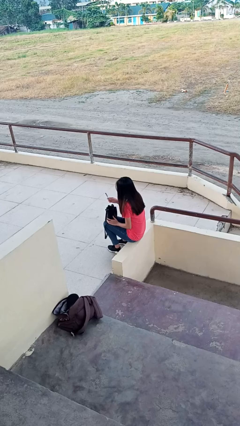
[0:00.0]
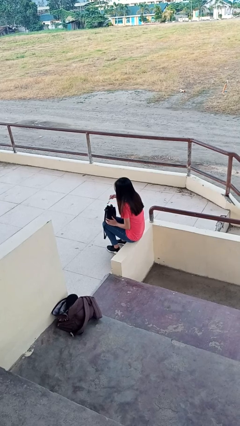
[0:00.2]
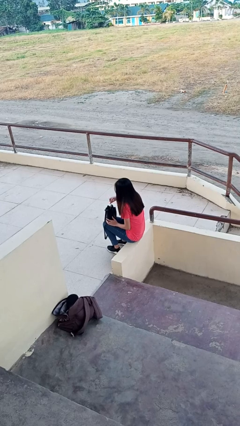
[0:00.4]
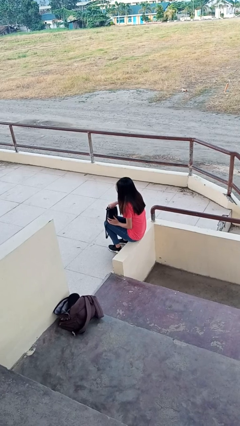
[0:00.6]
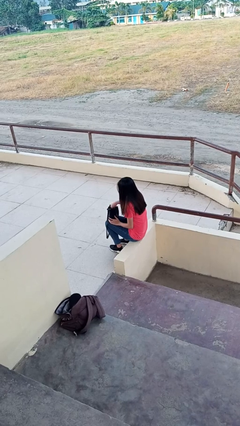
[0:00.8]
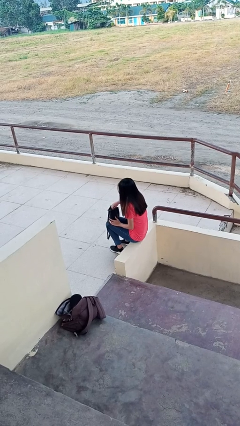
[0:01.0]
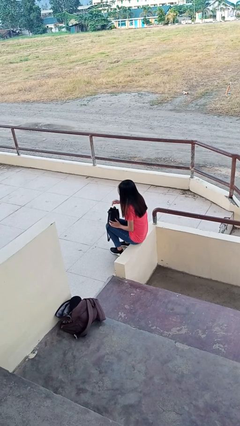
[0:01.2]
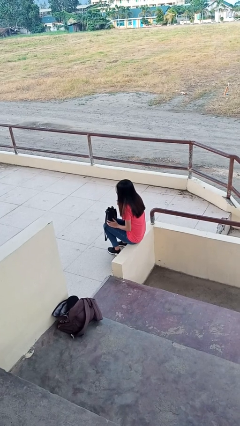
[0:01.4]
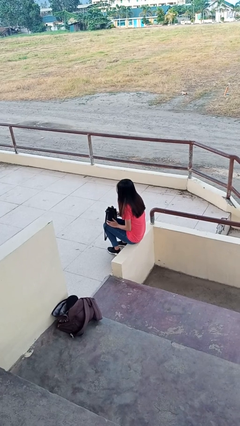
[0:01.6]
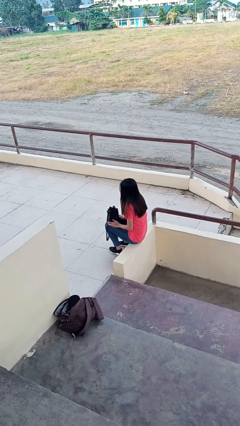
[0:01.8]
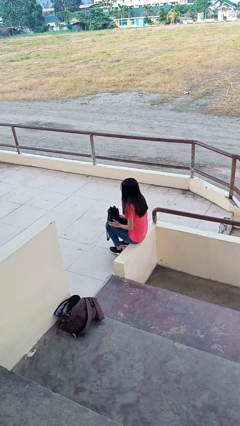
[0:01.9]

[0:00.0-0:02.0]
person puts object into purse

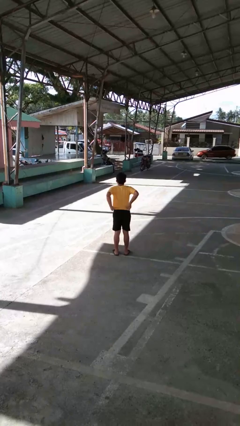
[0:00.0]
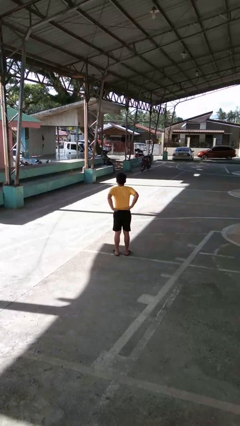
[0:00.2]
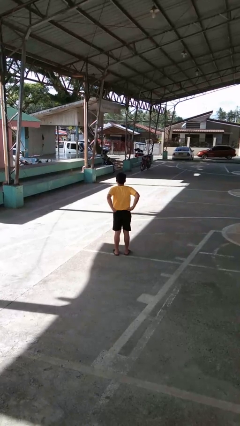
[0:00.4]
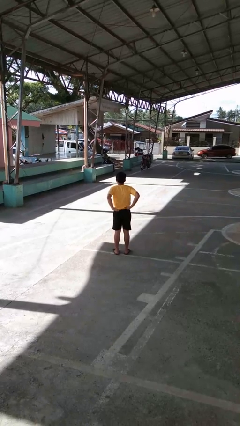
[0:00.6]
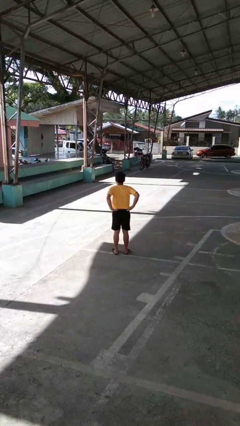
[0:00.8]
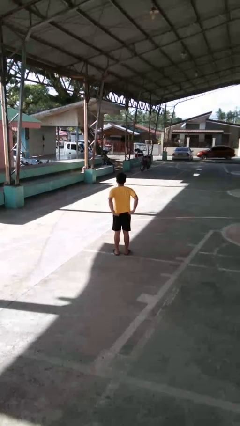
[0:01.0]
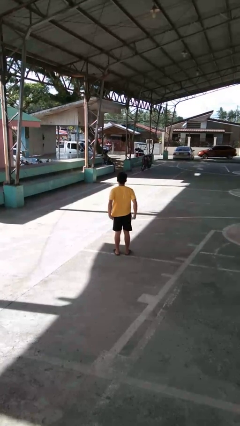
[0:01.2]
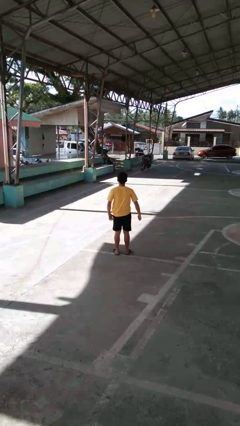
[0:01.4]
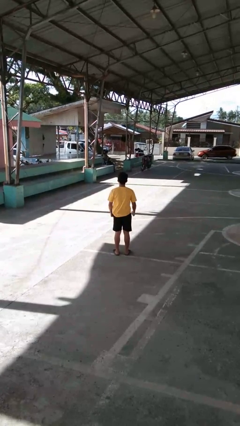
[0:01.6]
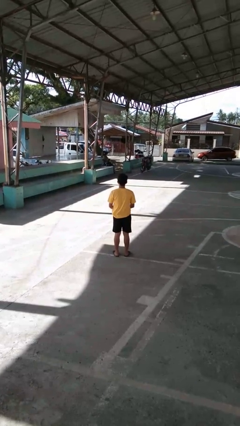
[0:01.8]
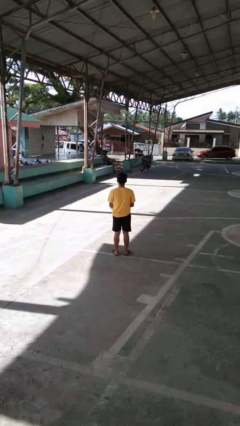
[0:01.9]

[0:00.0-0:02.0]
person untucks shirt

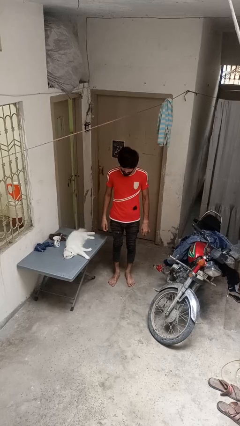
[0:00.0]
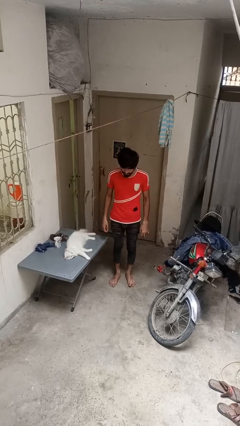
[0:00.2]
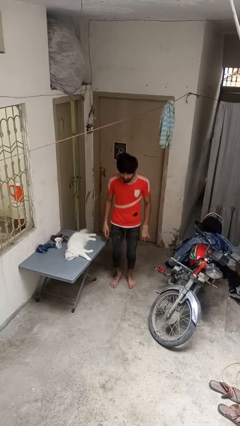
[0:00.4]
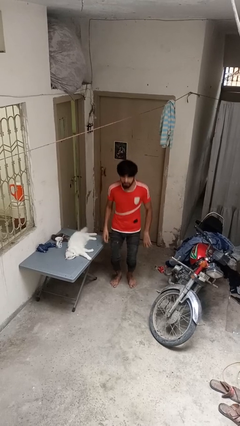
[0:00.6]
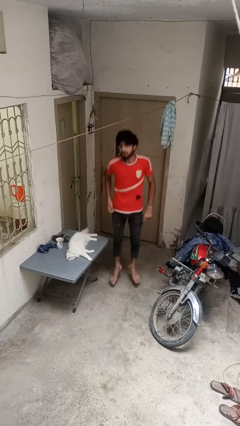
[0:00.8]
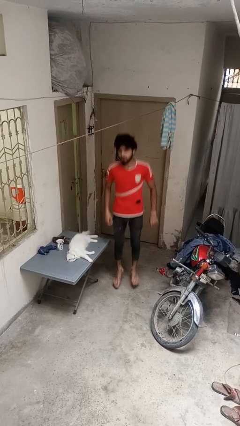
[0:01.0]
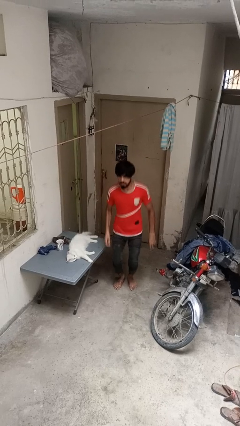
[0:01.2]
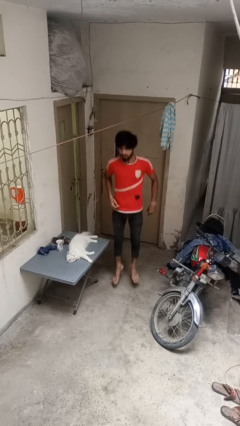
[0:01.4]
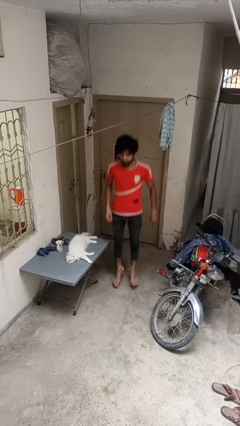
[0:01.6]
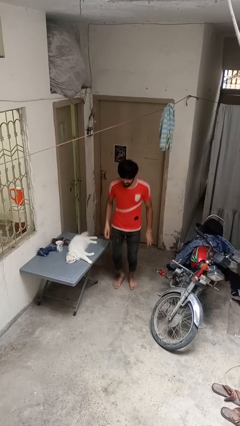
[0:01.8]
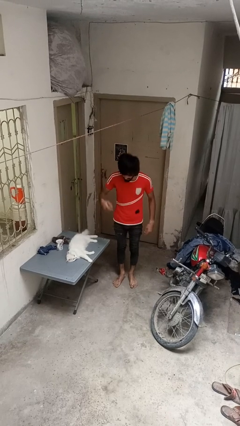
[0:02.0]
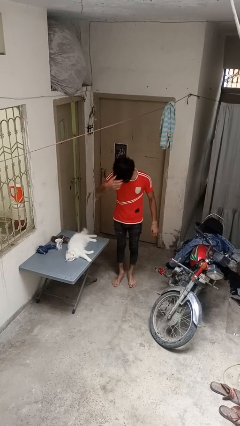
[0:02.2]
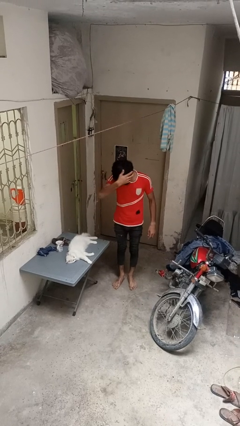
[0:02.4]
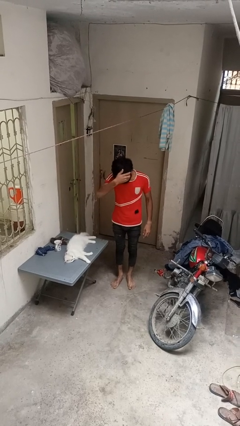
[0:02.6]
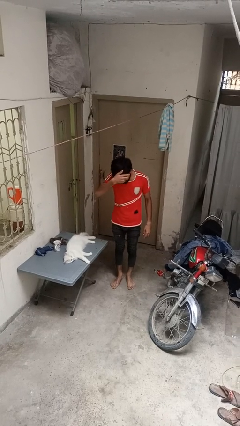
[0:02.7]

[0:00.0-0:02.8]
person jumps

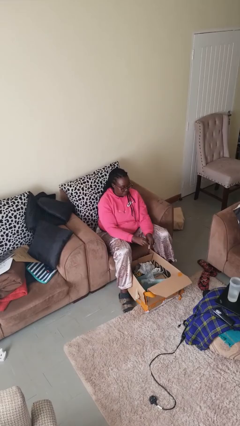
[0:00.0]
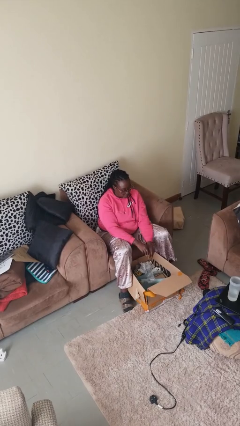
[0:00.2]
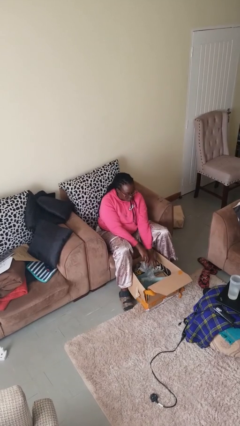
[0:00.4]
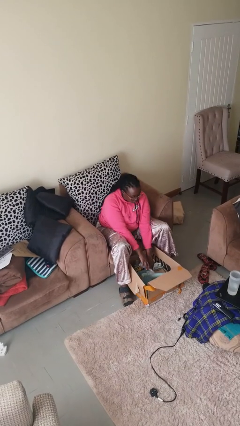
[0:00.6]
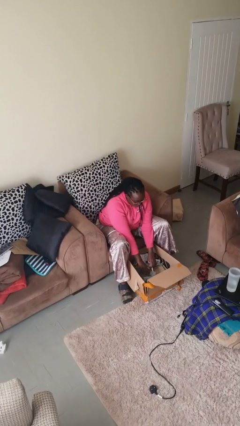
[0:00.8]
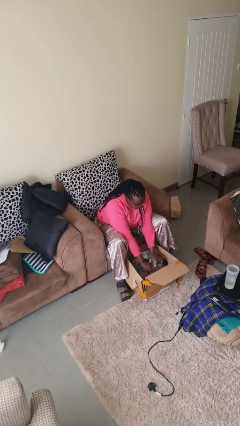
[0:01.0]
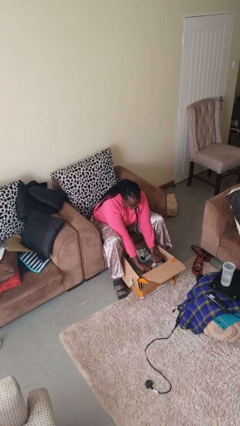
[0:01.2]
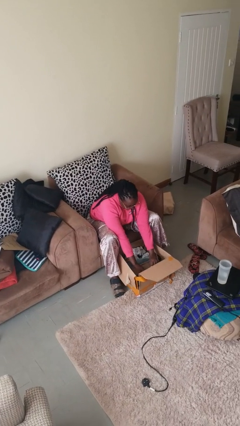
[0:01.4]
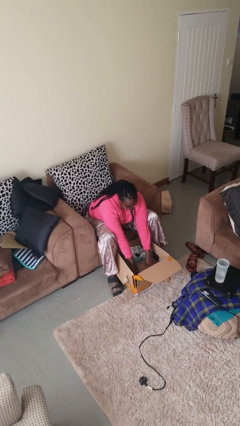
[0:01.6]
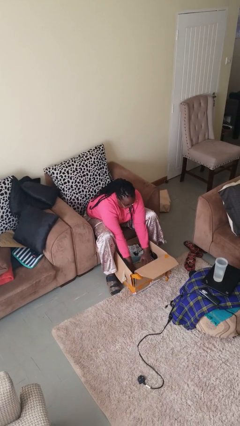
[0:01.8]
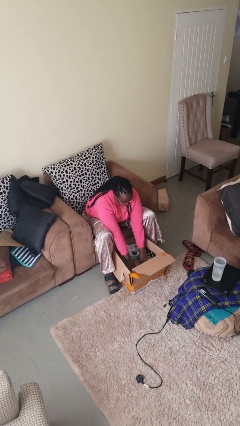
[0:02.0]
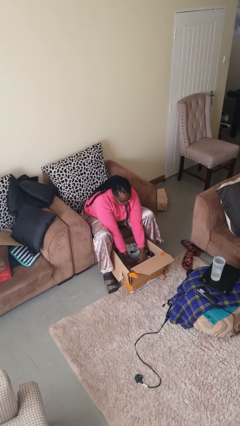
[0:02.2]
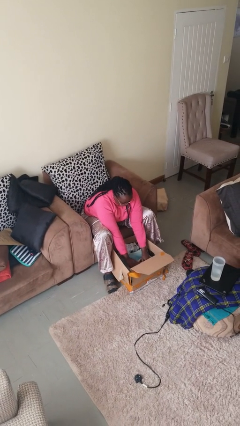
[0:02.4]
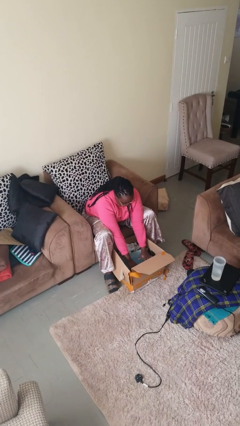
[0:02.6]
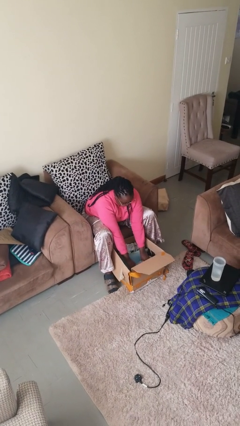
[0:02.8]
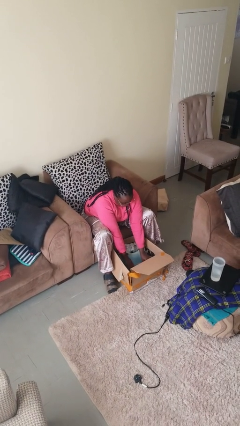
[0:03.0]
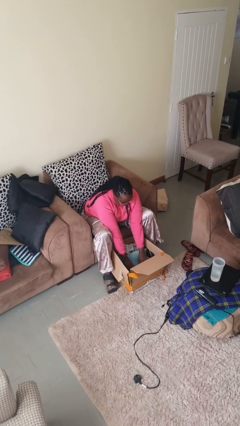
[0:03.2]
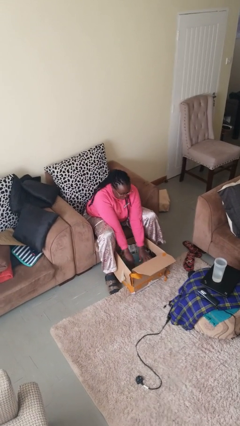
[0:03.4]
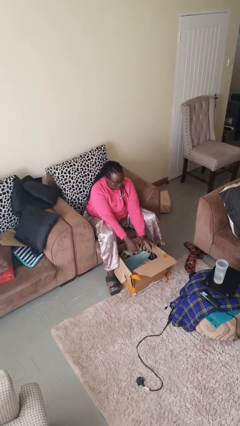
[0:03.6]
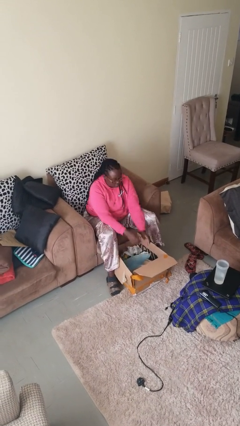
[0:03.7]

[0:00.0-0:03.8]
person searches in box

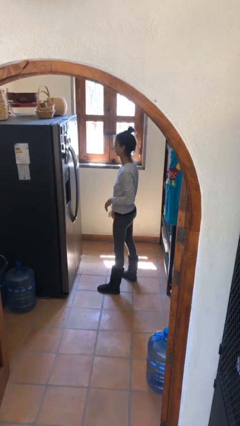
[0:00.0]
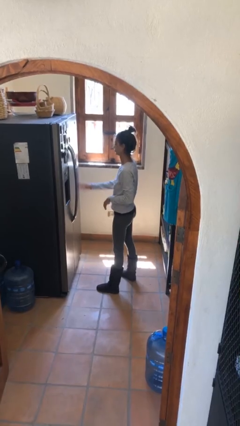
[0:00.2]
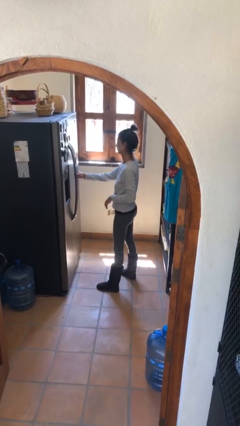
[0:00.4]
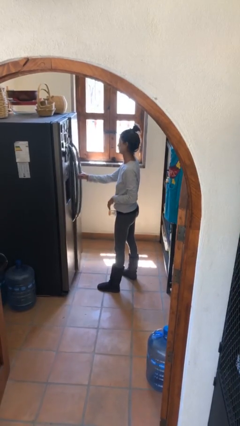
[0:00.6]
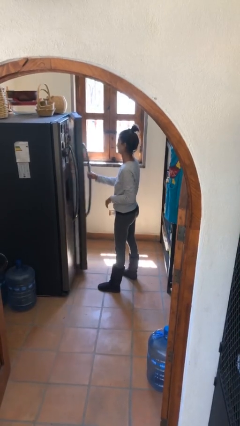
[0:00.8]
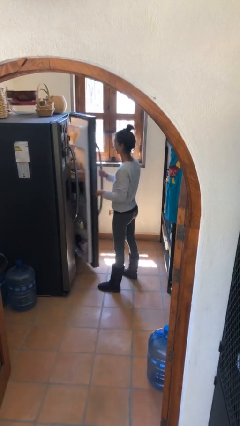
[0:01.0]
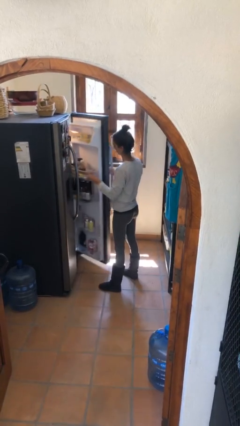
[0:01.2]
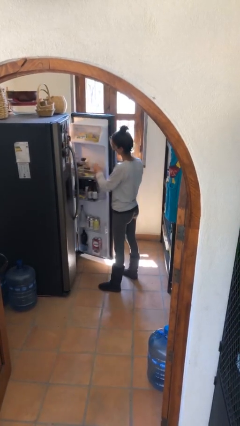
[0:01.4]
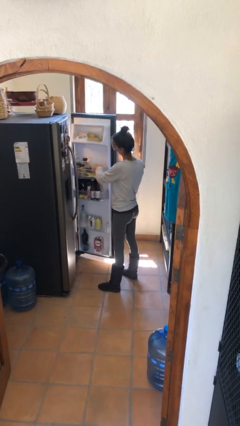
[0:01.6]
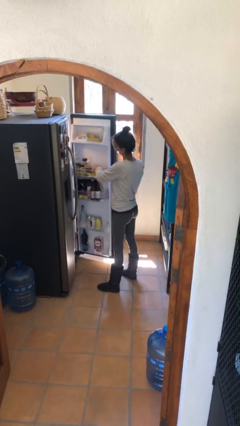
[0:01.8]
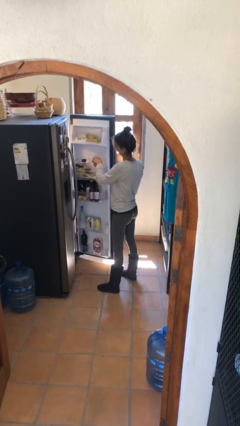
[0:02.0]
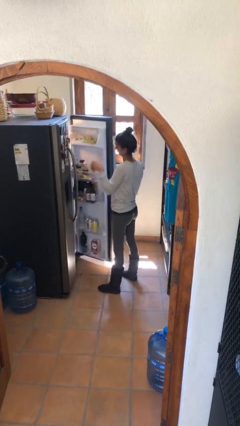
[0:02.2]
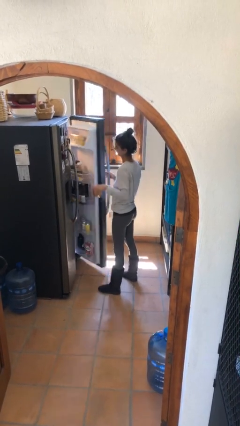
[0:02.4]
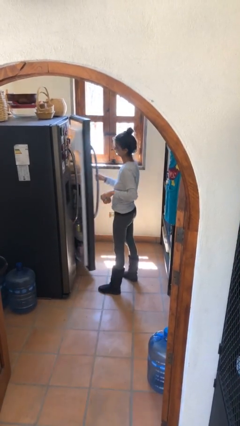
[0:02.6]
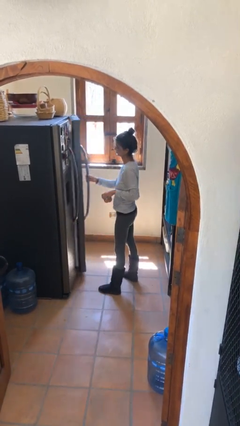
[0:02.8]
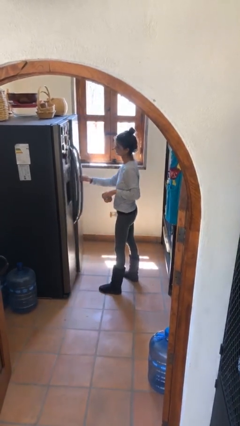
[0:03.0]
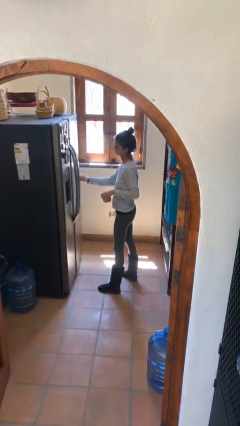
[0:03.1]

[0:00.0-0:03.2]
person takes object from refrigerator

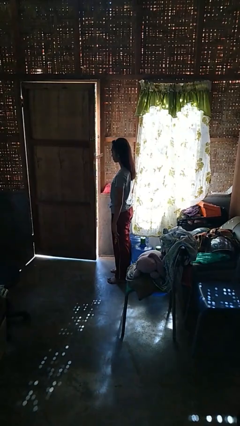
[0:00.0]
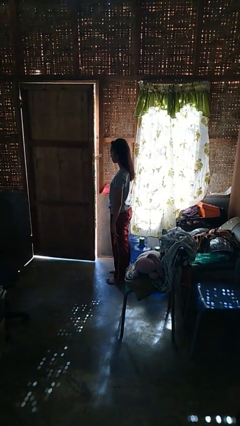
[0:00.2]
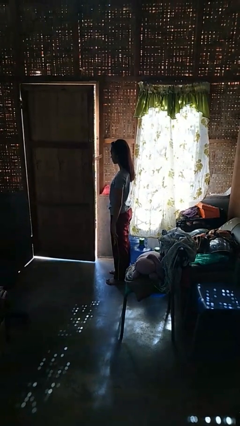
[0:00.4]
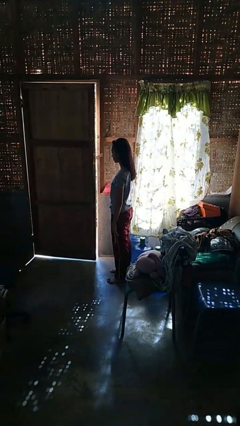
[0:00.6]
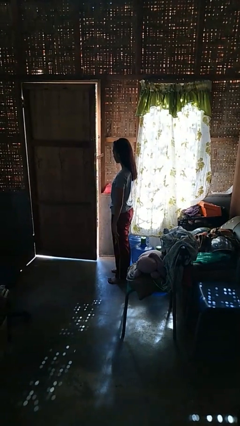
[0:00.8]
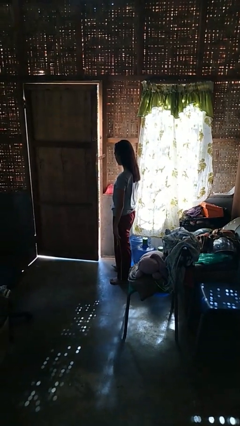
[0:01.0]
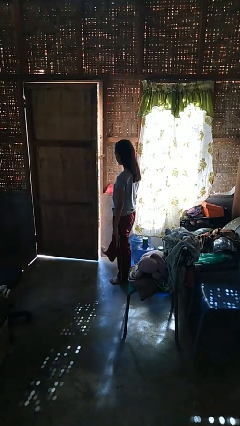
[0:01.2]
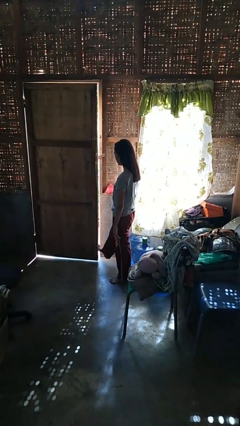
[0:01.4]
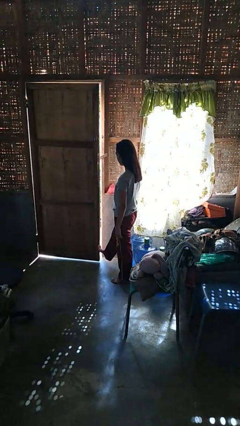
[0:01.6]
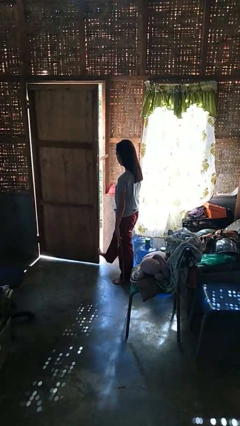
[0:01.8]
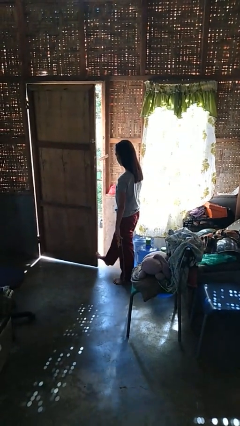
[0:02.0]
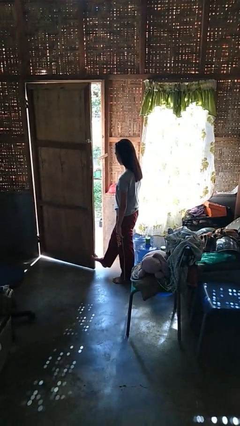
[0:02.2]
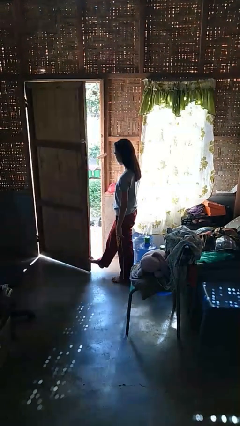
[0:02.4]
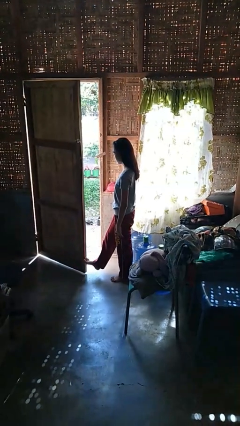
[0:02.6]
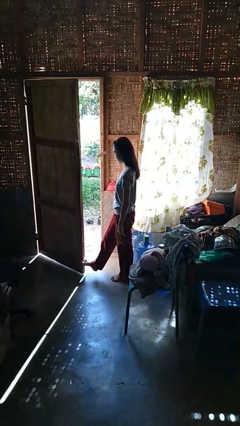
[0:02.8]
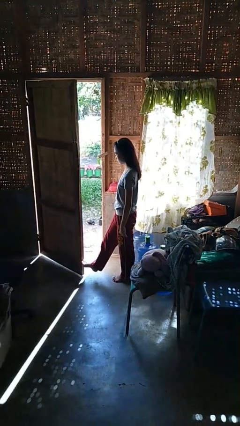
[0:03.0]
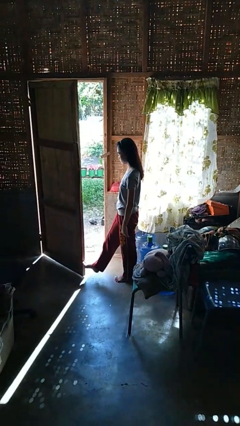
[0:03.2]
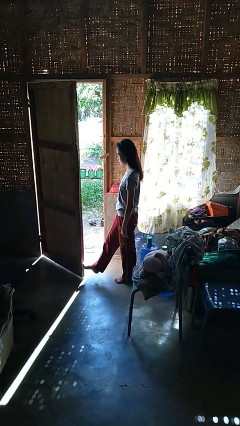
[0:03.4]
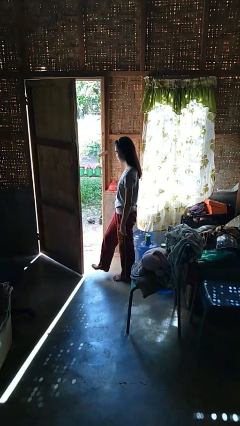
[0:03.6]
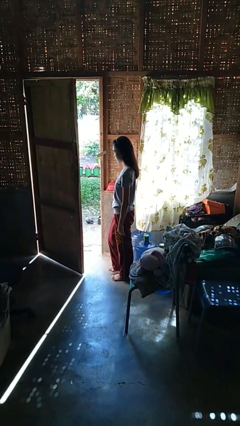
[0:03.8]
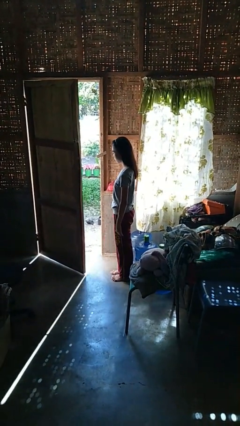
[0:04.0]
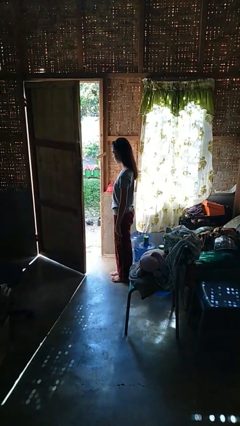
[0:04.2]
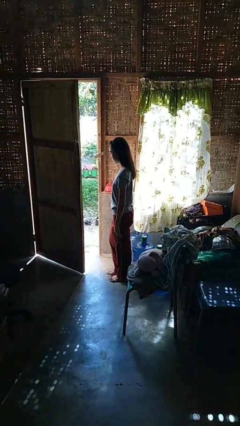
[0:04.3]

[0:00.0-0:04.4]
person opens facility door
